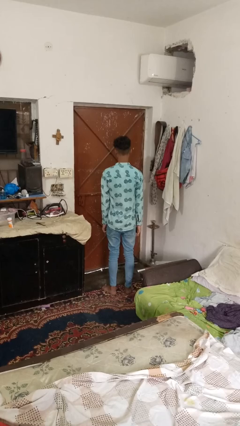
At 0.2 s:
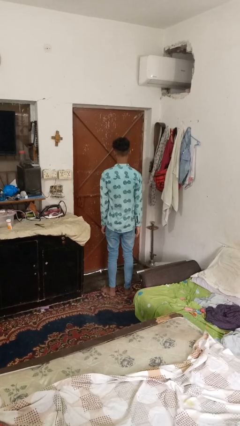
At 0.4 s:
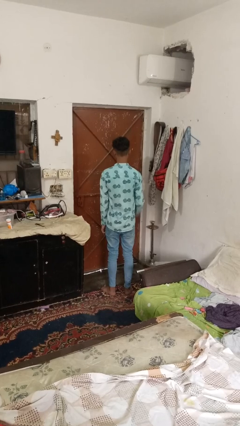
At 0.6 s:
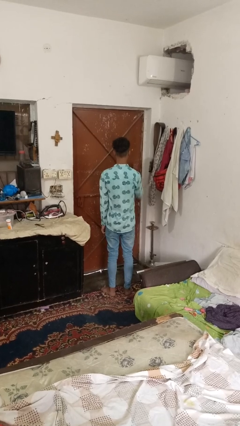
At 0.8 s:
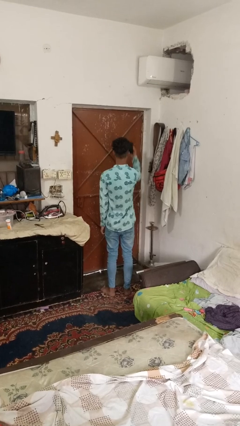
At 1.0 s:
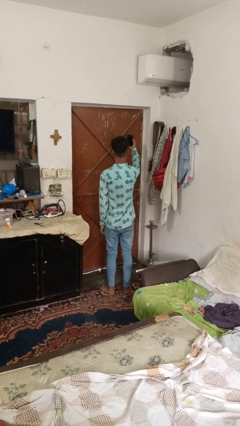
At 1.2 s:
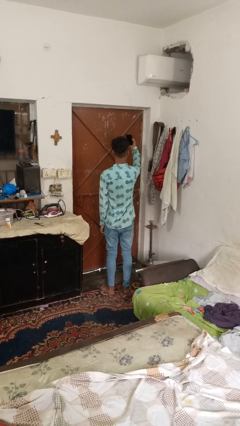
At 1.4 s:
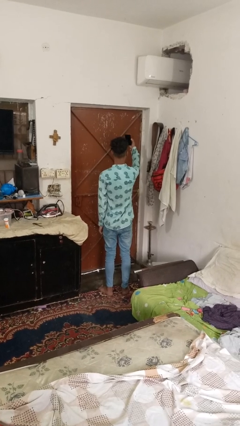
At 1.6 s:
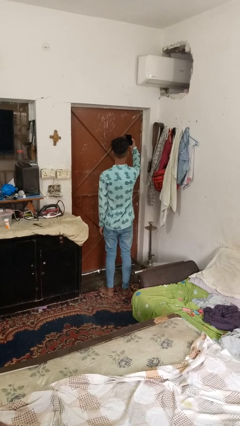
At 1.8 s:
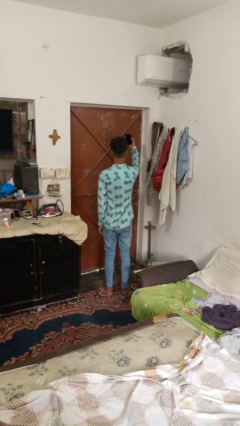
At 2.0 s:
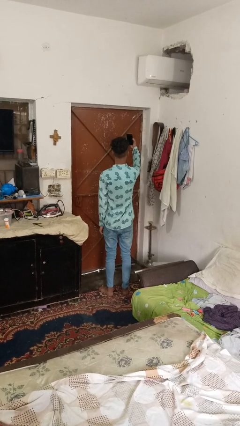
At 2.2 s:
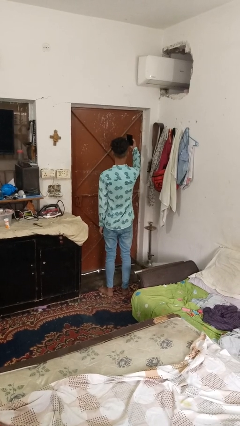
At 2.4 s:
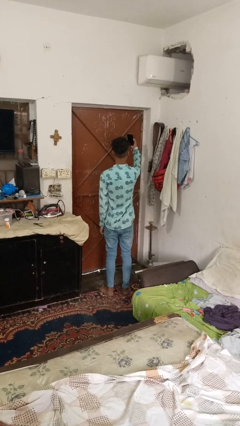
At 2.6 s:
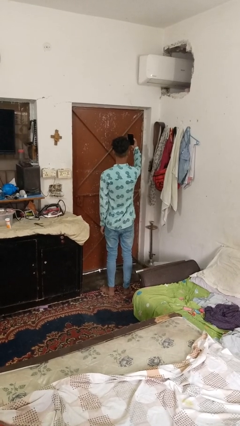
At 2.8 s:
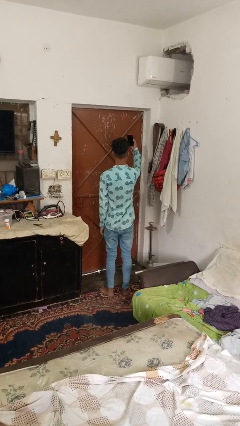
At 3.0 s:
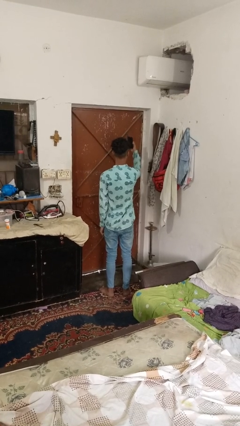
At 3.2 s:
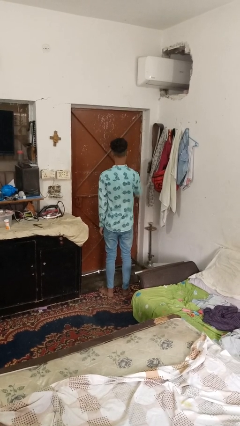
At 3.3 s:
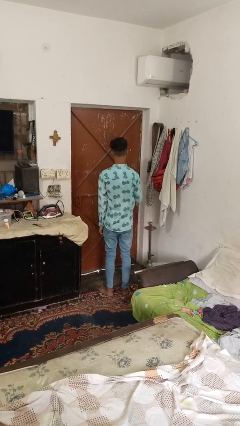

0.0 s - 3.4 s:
person takes selfie

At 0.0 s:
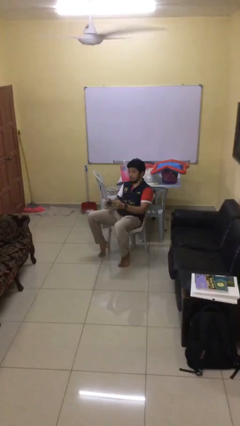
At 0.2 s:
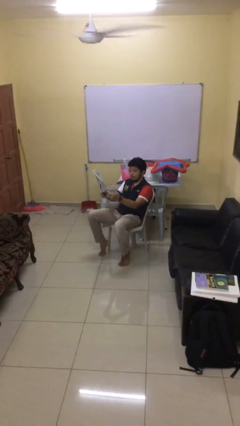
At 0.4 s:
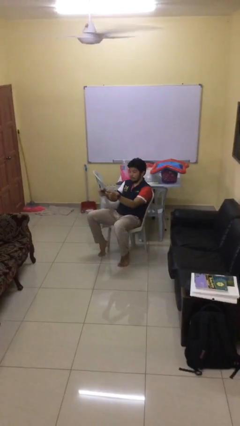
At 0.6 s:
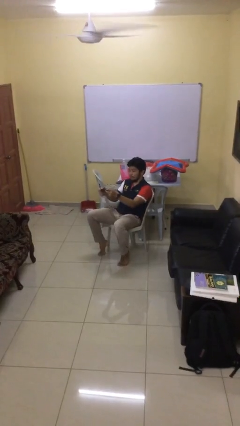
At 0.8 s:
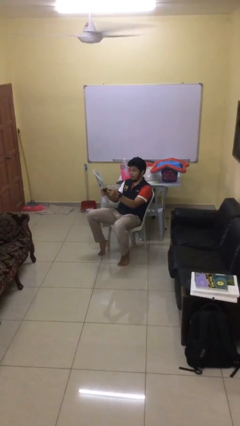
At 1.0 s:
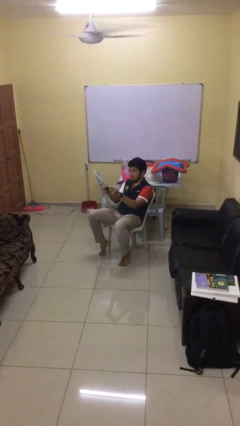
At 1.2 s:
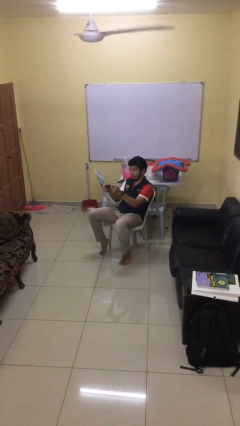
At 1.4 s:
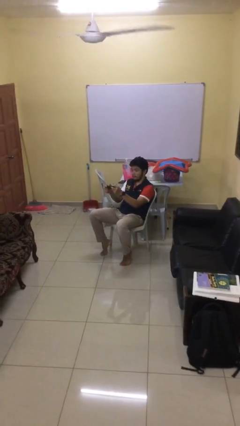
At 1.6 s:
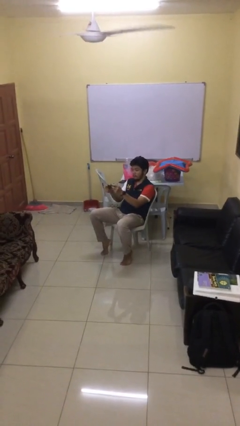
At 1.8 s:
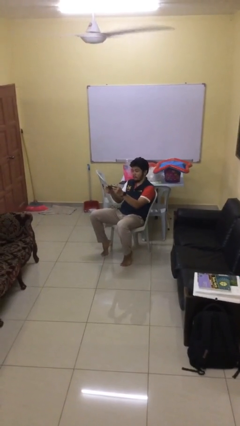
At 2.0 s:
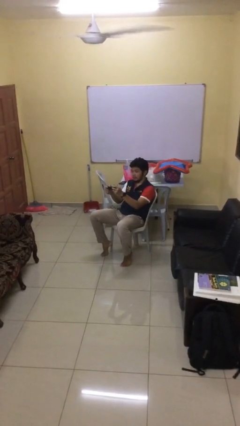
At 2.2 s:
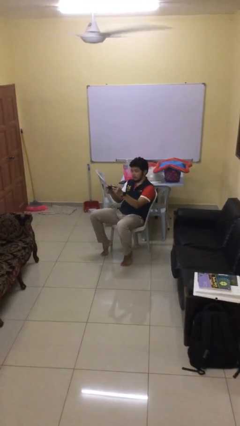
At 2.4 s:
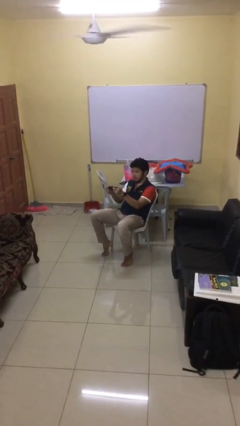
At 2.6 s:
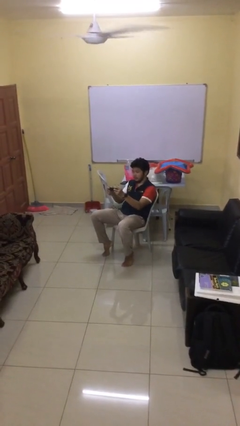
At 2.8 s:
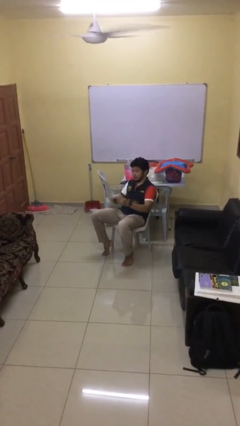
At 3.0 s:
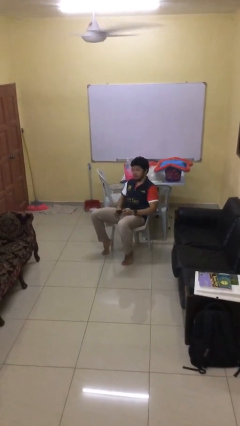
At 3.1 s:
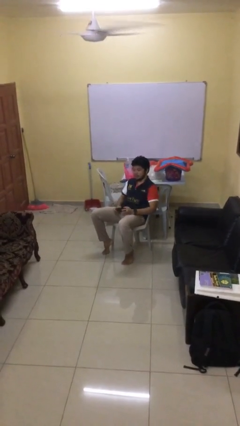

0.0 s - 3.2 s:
person interacts with handheld game

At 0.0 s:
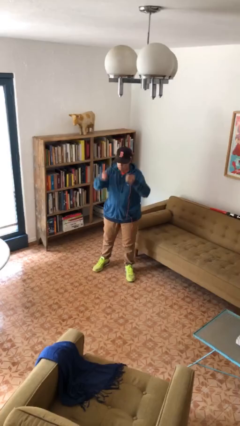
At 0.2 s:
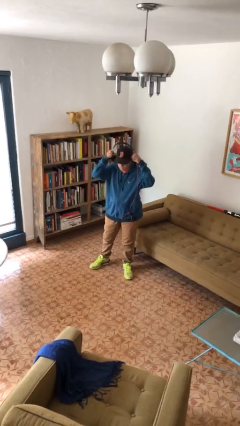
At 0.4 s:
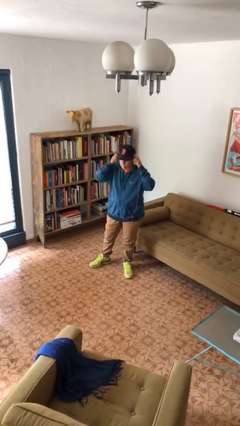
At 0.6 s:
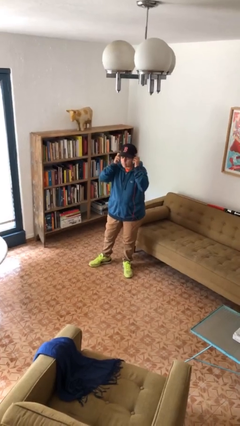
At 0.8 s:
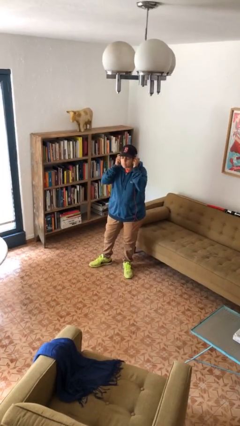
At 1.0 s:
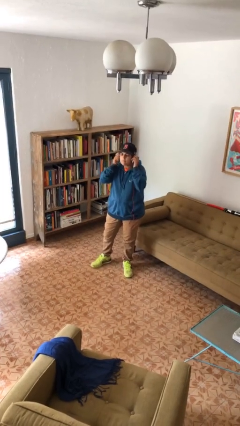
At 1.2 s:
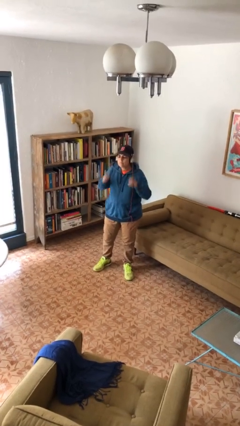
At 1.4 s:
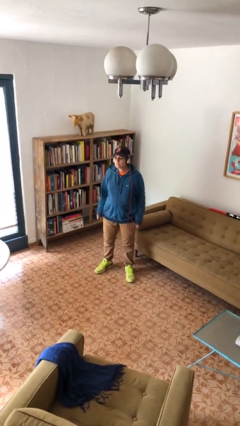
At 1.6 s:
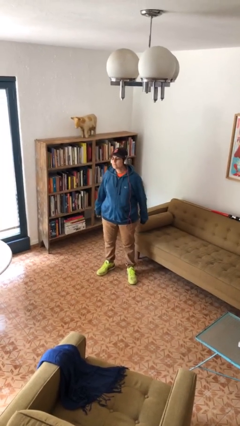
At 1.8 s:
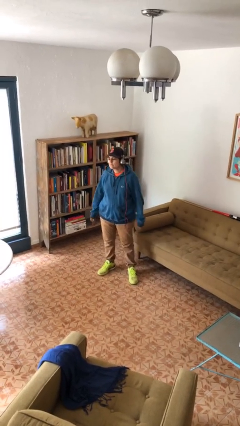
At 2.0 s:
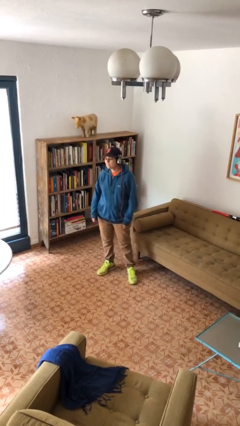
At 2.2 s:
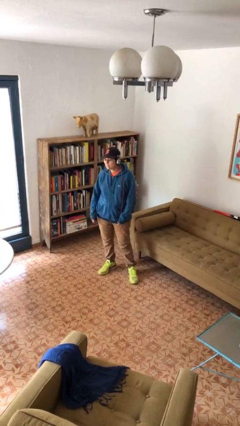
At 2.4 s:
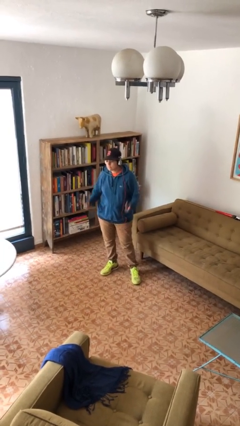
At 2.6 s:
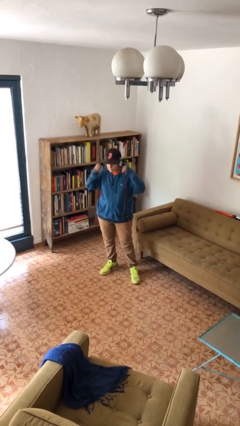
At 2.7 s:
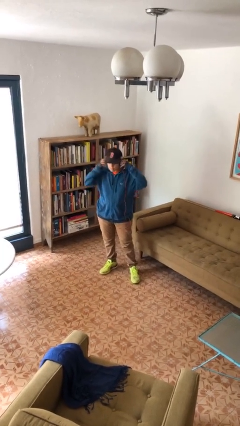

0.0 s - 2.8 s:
person puts on headphones

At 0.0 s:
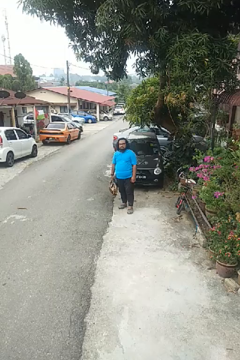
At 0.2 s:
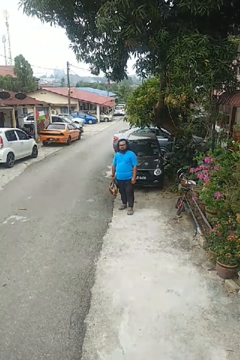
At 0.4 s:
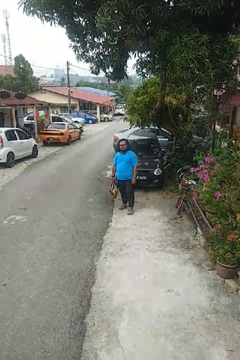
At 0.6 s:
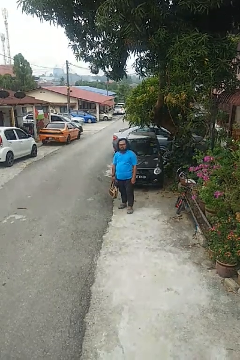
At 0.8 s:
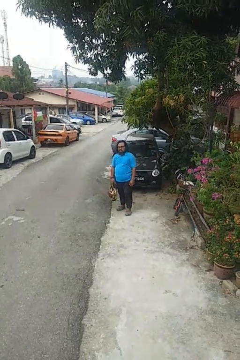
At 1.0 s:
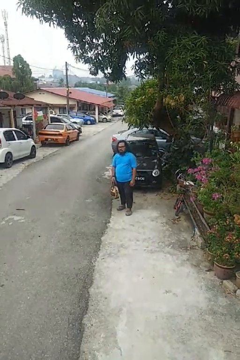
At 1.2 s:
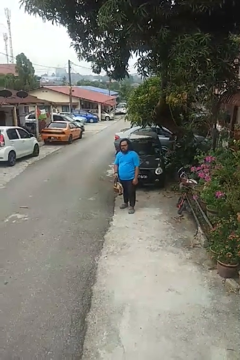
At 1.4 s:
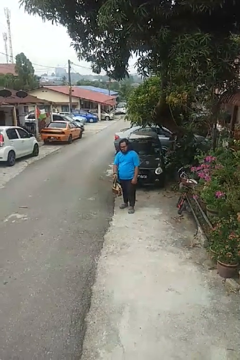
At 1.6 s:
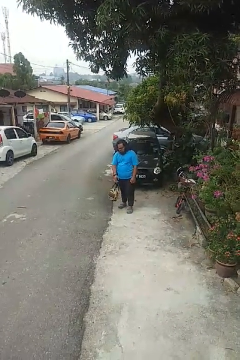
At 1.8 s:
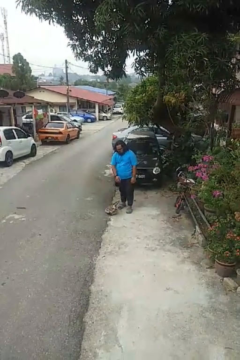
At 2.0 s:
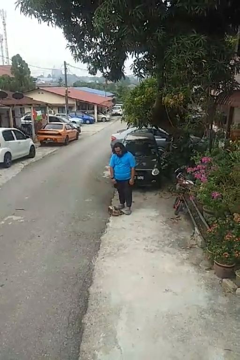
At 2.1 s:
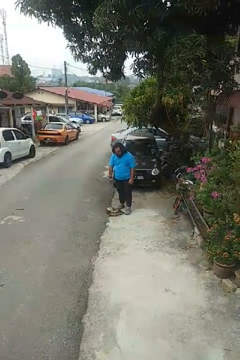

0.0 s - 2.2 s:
person drops object

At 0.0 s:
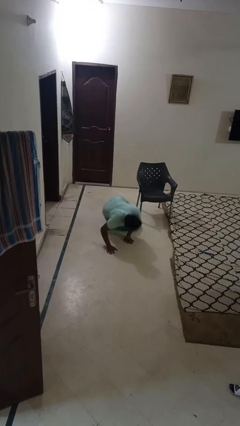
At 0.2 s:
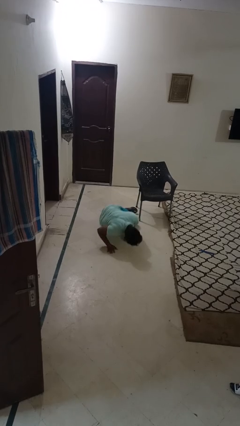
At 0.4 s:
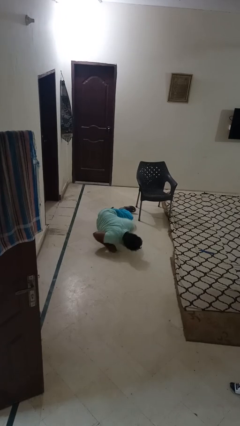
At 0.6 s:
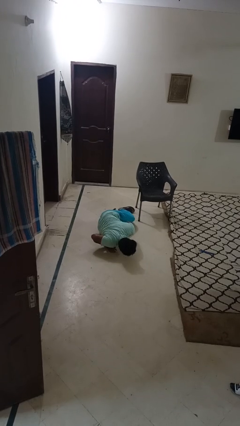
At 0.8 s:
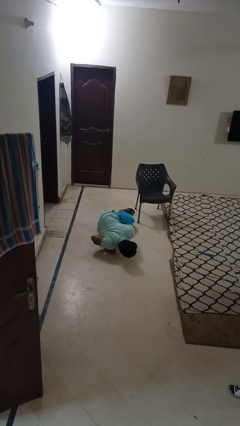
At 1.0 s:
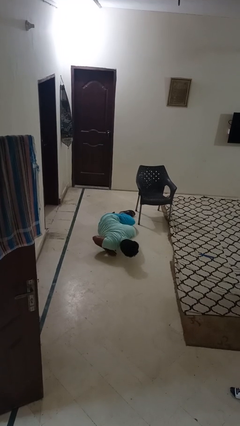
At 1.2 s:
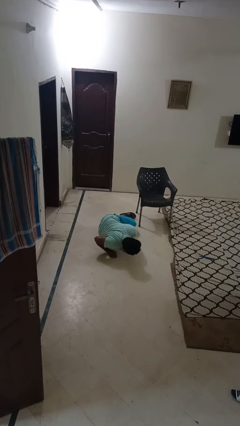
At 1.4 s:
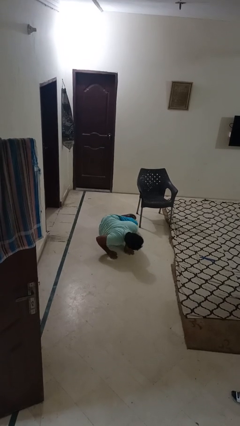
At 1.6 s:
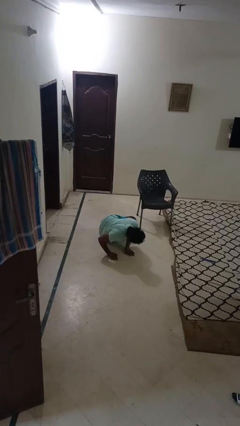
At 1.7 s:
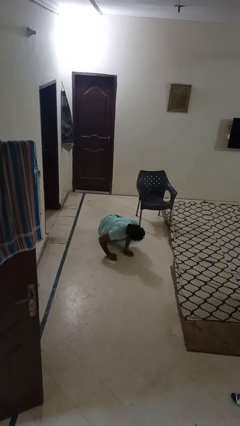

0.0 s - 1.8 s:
person lies down on floor

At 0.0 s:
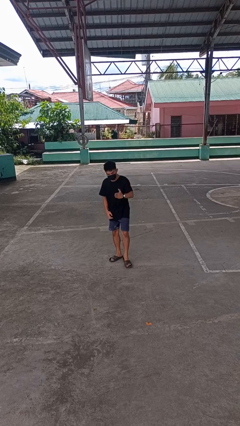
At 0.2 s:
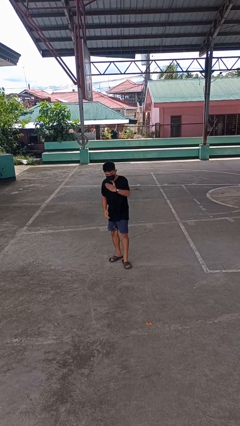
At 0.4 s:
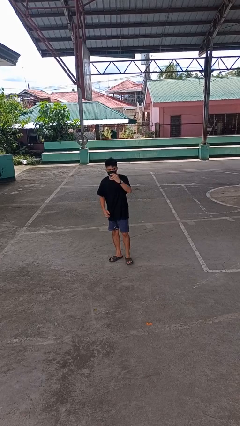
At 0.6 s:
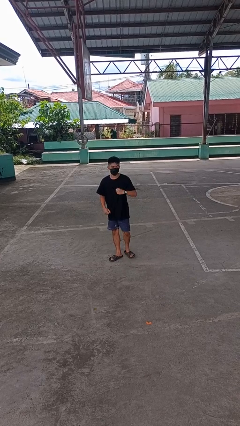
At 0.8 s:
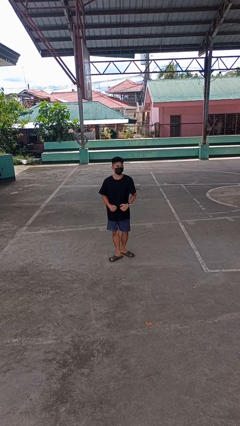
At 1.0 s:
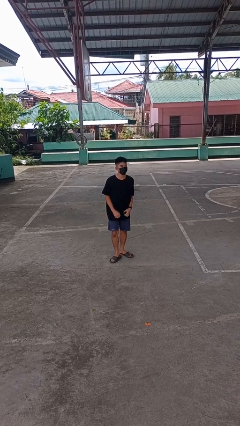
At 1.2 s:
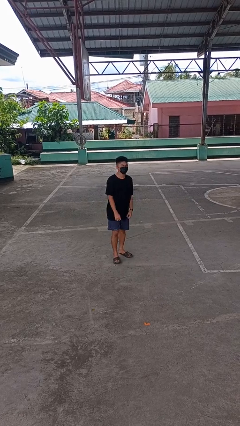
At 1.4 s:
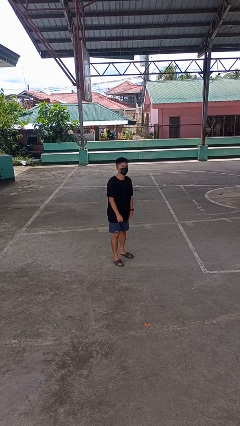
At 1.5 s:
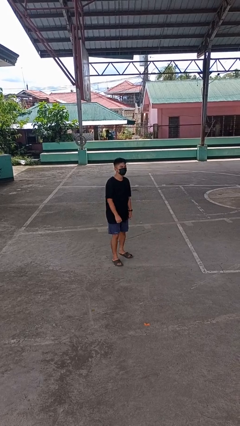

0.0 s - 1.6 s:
person karate chop

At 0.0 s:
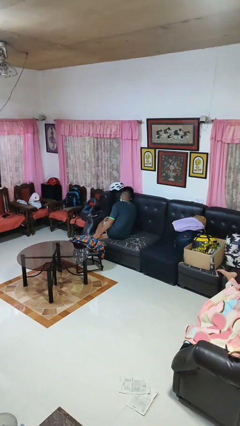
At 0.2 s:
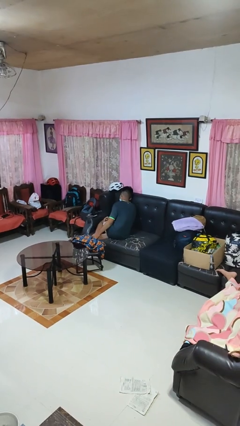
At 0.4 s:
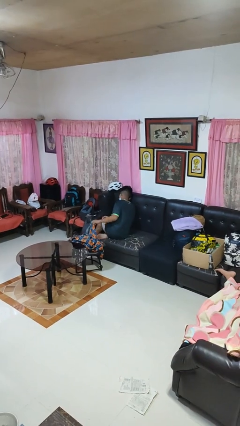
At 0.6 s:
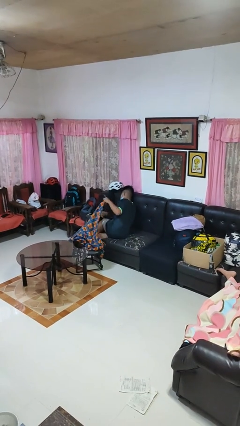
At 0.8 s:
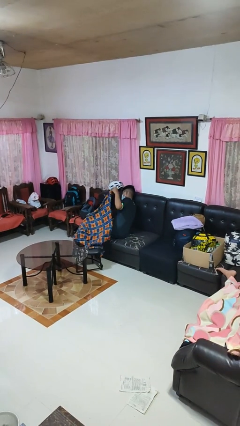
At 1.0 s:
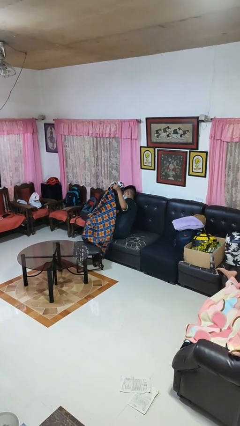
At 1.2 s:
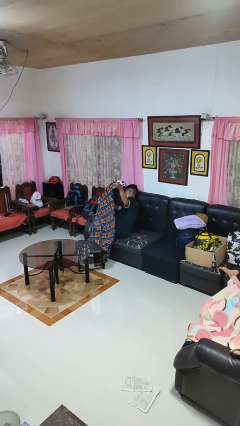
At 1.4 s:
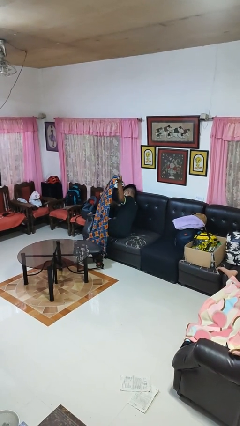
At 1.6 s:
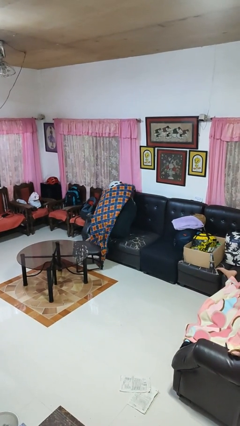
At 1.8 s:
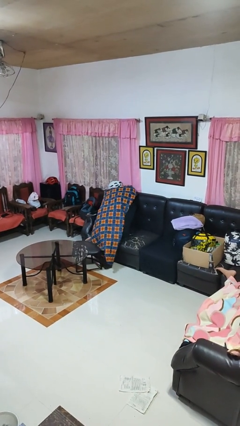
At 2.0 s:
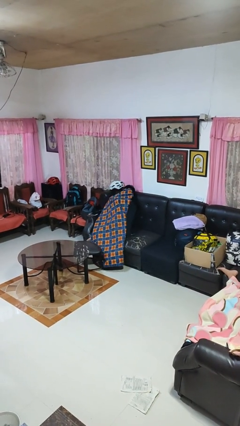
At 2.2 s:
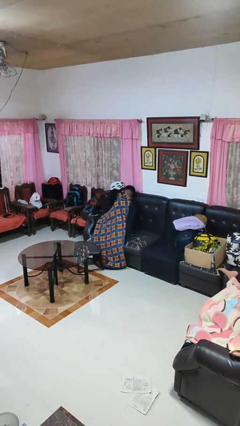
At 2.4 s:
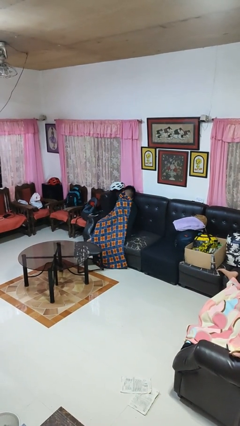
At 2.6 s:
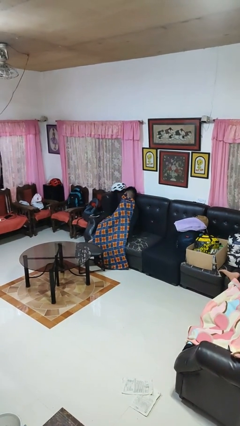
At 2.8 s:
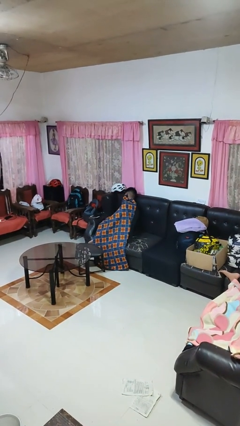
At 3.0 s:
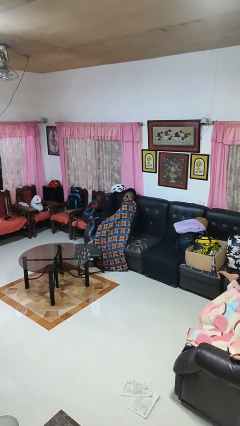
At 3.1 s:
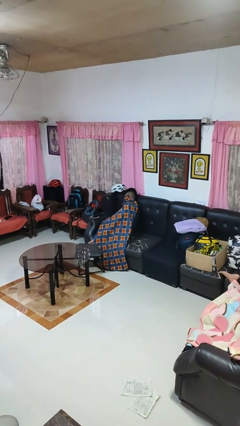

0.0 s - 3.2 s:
person covers with blanket
